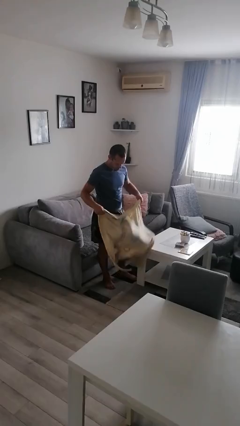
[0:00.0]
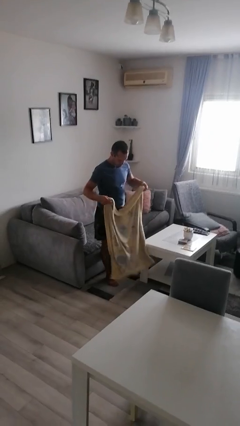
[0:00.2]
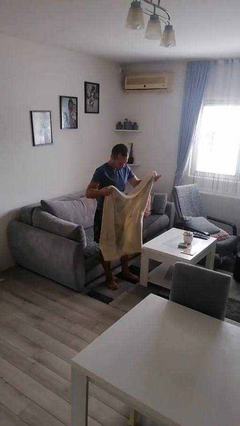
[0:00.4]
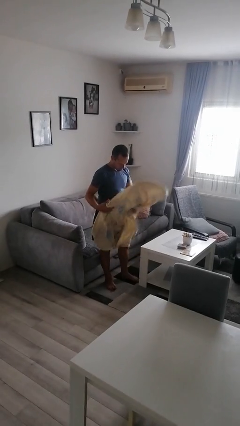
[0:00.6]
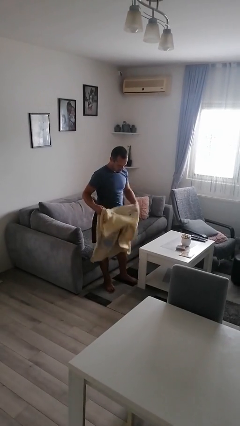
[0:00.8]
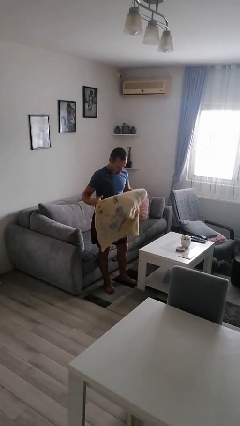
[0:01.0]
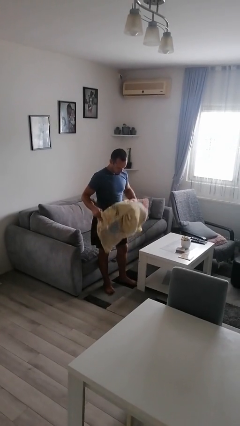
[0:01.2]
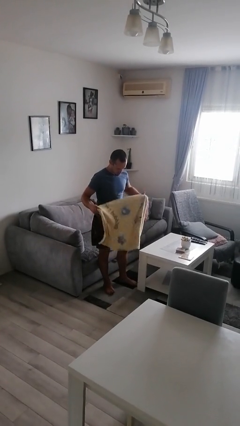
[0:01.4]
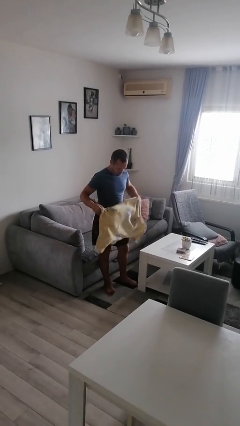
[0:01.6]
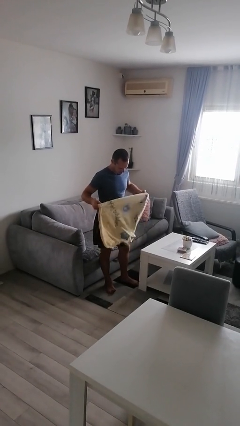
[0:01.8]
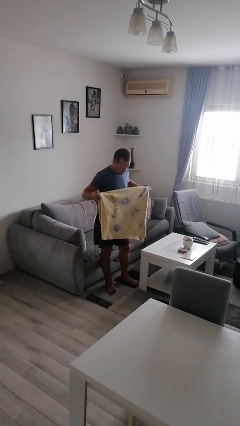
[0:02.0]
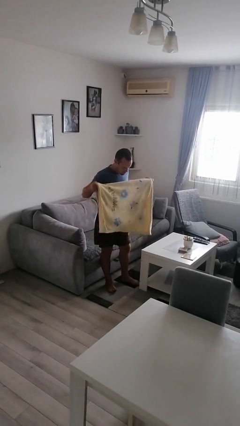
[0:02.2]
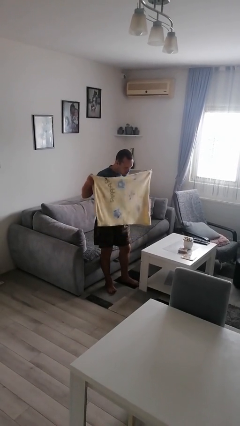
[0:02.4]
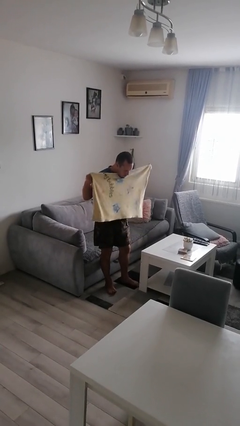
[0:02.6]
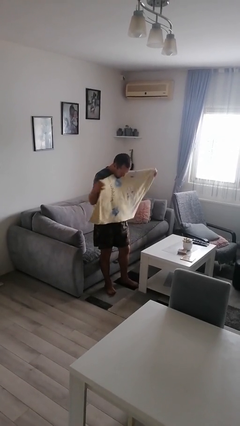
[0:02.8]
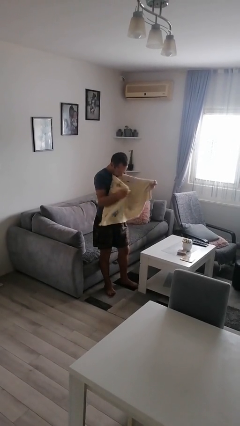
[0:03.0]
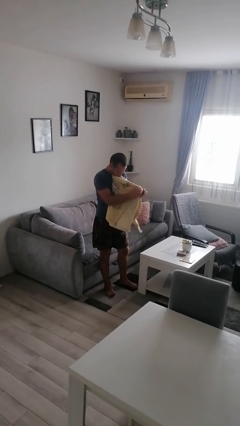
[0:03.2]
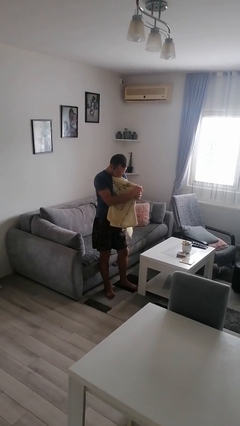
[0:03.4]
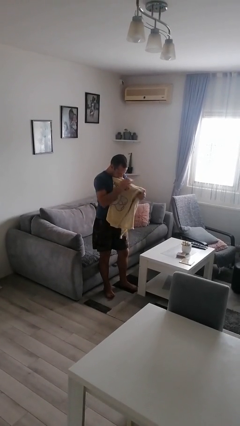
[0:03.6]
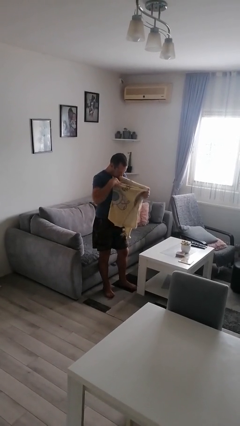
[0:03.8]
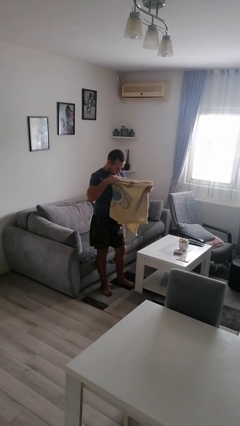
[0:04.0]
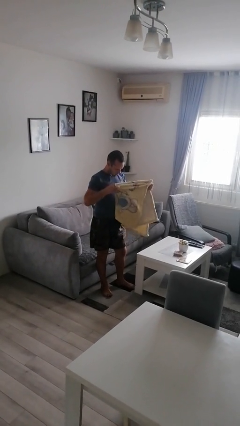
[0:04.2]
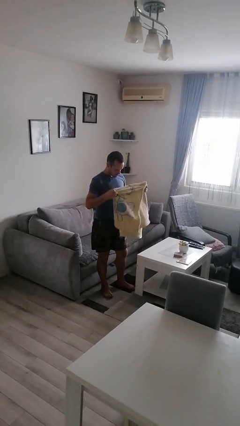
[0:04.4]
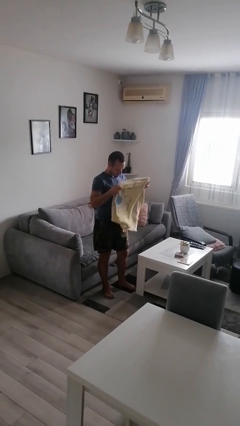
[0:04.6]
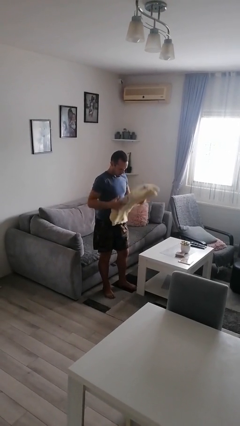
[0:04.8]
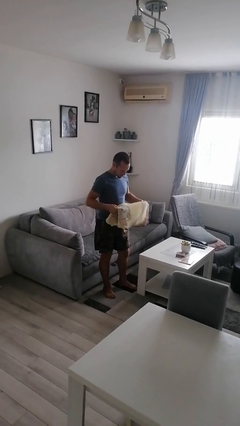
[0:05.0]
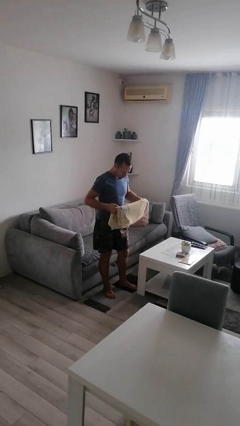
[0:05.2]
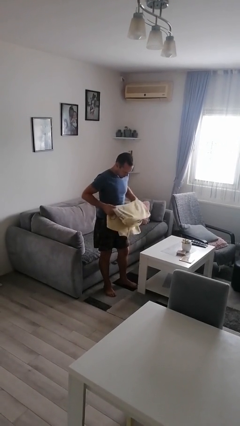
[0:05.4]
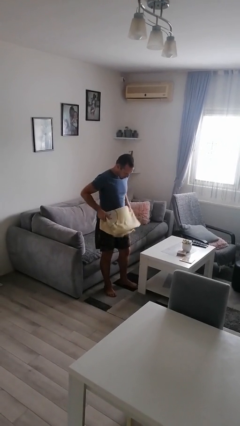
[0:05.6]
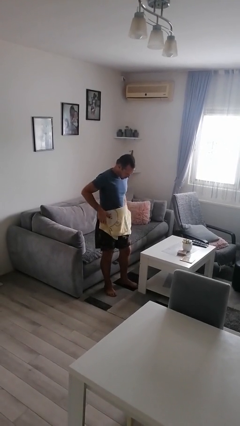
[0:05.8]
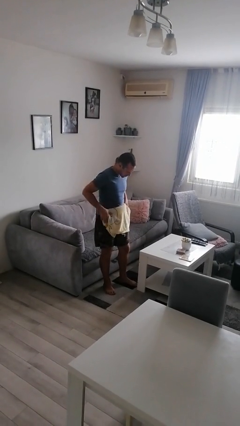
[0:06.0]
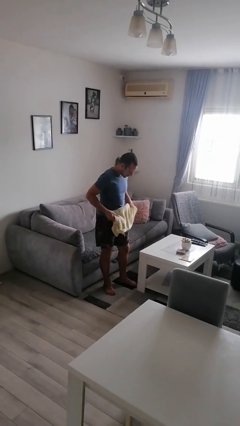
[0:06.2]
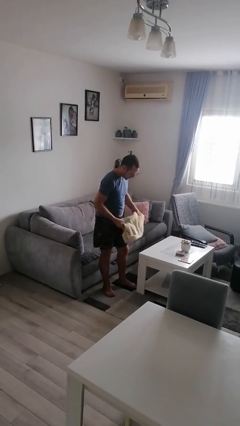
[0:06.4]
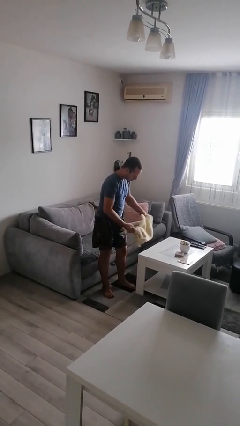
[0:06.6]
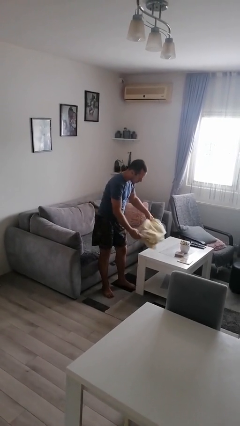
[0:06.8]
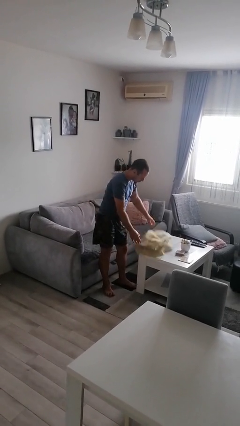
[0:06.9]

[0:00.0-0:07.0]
person folds blanket

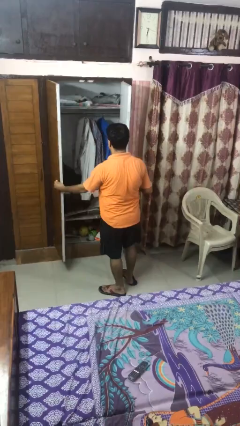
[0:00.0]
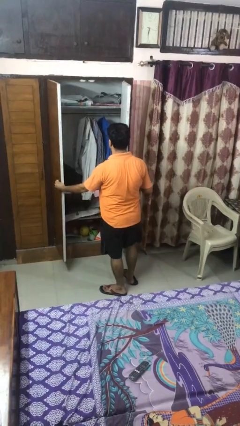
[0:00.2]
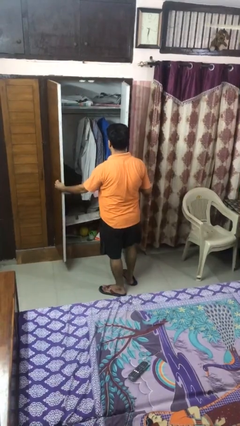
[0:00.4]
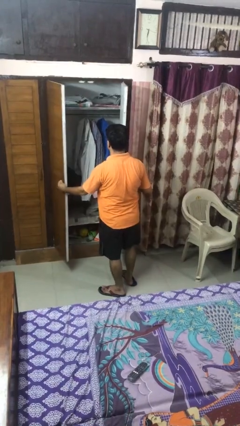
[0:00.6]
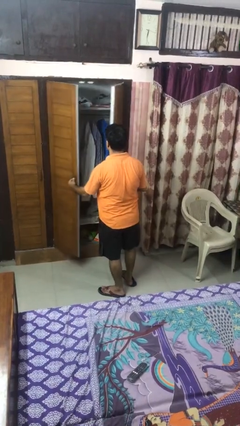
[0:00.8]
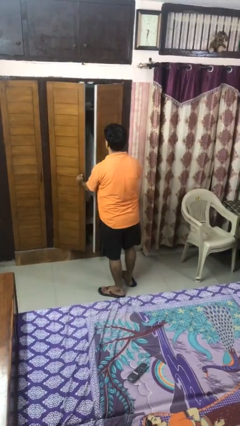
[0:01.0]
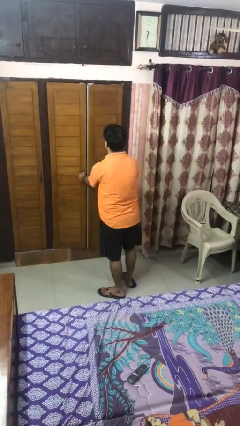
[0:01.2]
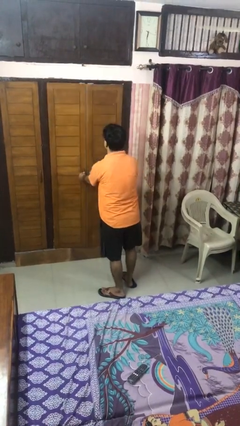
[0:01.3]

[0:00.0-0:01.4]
person closes closet door

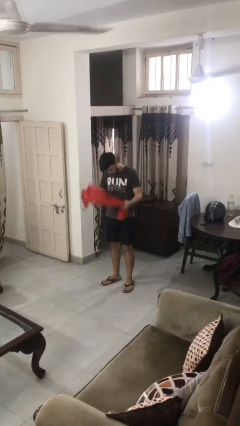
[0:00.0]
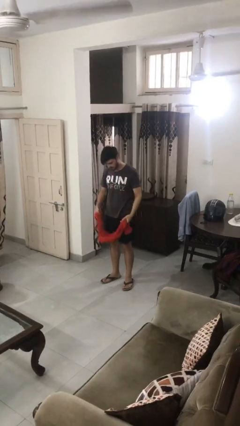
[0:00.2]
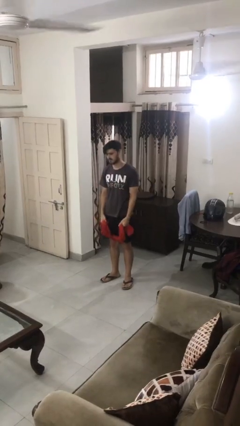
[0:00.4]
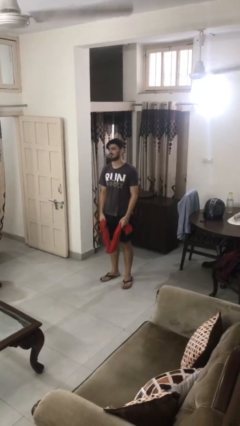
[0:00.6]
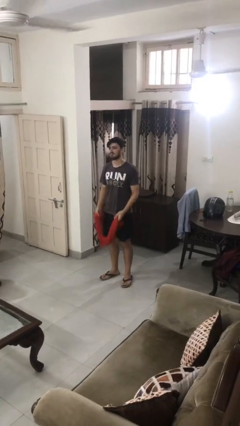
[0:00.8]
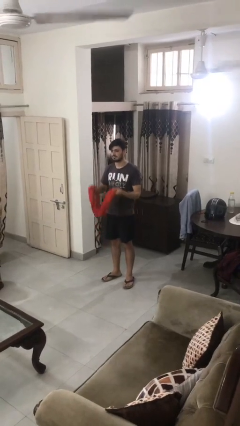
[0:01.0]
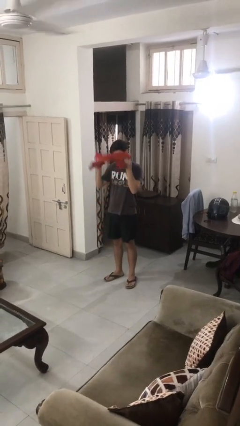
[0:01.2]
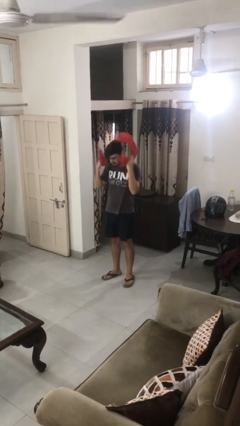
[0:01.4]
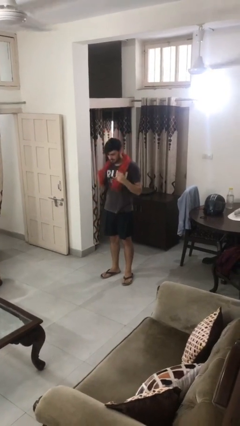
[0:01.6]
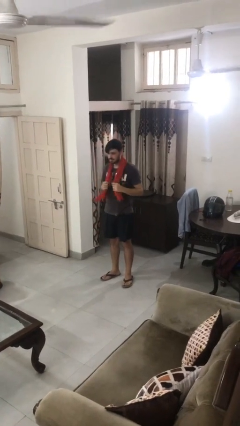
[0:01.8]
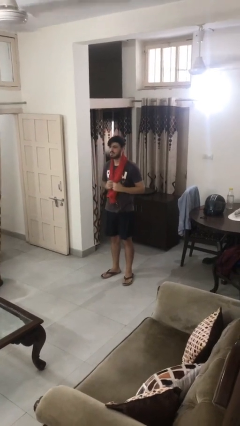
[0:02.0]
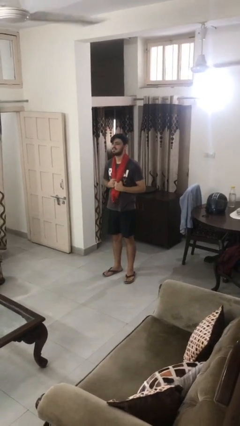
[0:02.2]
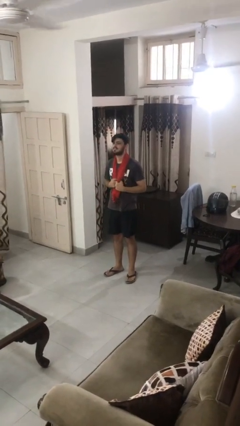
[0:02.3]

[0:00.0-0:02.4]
person puts on scarf

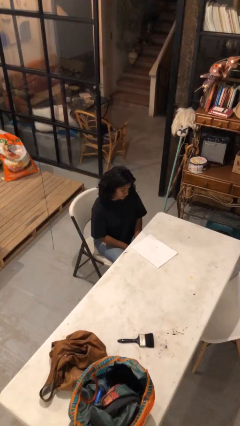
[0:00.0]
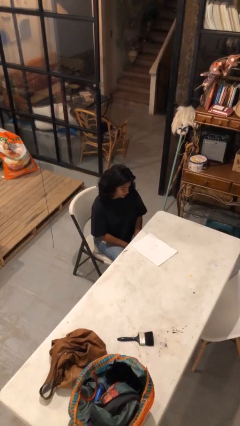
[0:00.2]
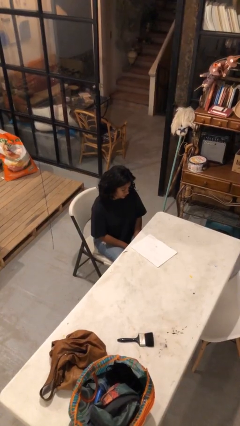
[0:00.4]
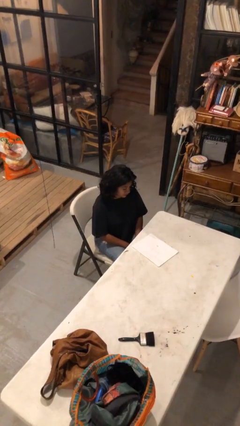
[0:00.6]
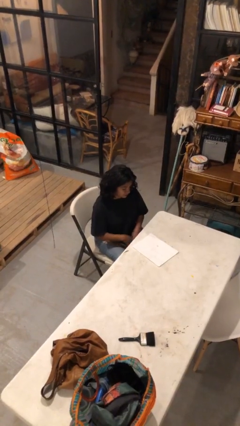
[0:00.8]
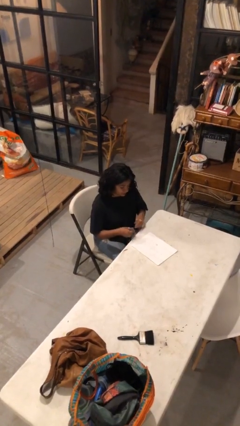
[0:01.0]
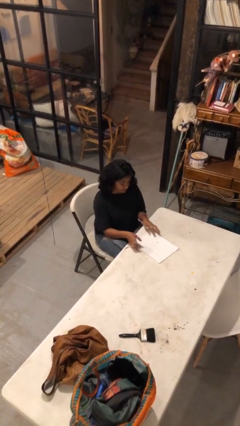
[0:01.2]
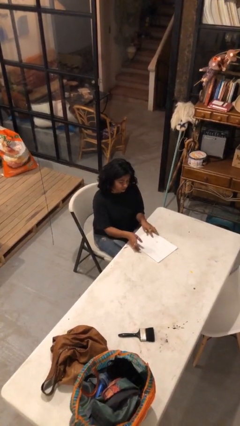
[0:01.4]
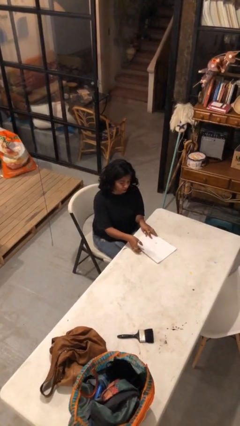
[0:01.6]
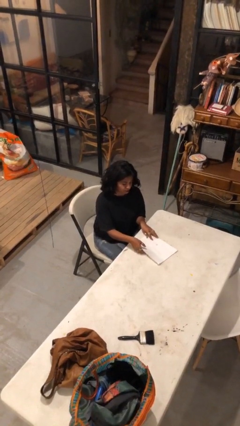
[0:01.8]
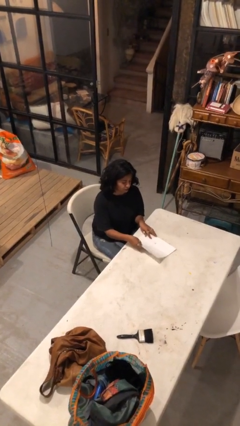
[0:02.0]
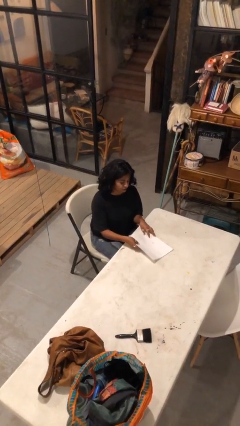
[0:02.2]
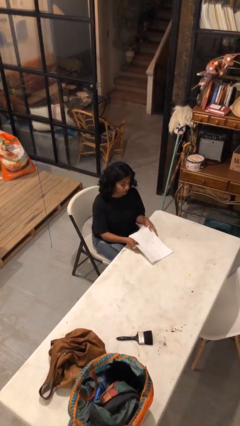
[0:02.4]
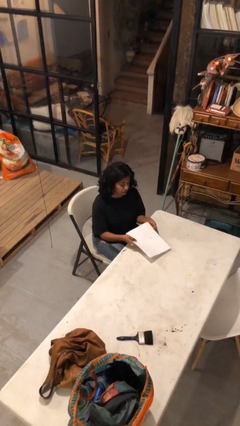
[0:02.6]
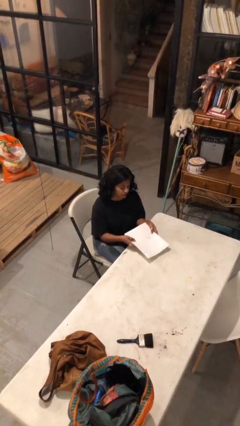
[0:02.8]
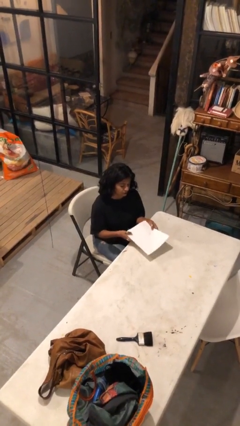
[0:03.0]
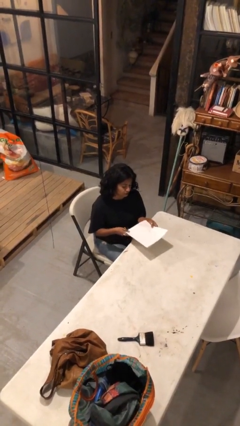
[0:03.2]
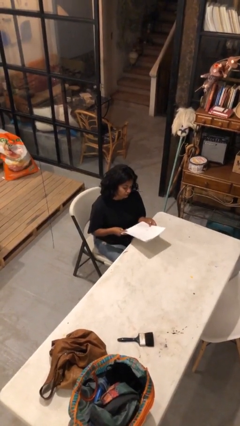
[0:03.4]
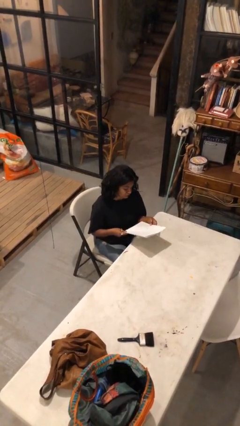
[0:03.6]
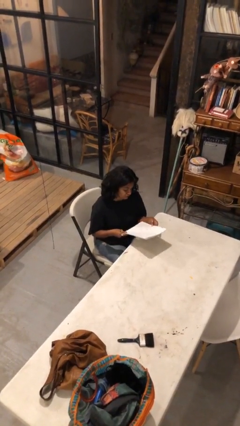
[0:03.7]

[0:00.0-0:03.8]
person picks up object from table

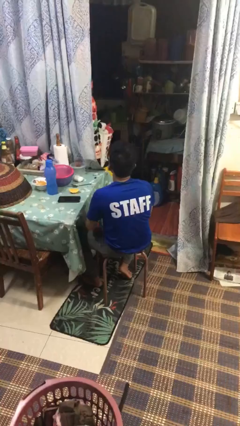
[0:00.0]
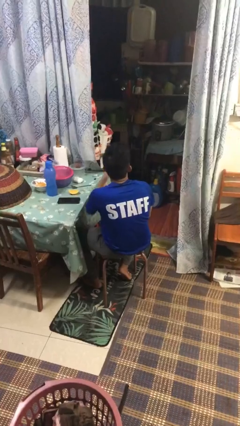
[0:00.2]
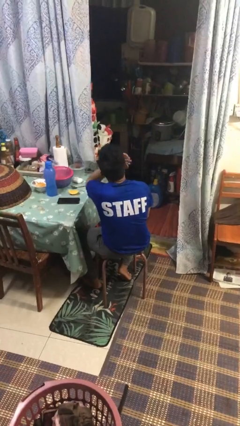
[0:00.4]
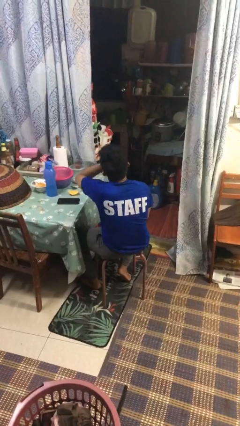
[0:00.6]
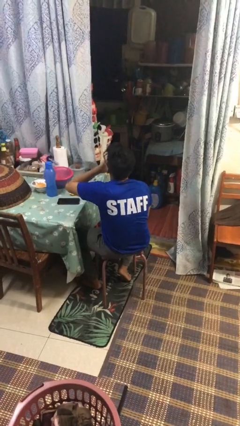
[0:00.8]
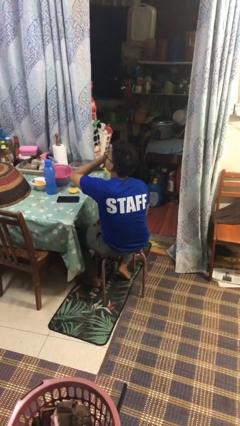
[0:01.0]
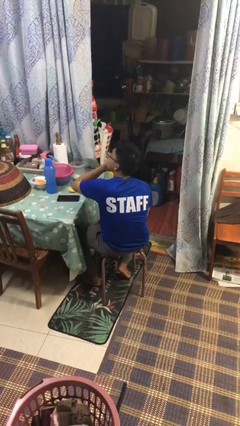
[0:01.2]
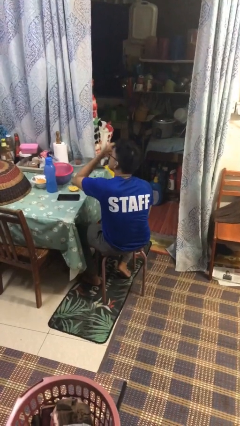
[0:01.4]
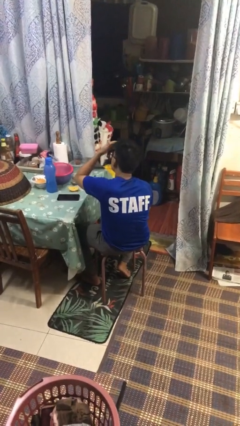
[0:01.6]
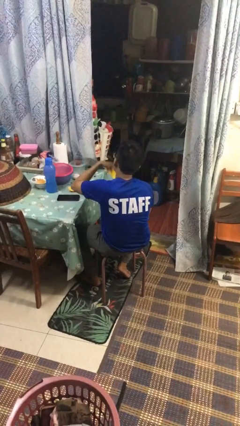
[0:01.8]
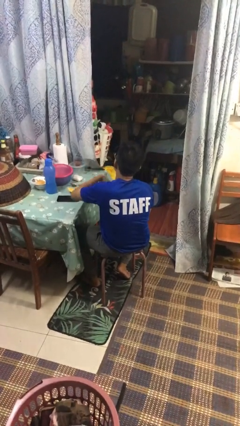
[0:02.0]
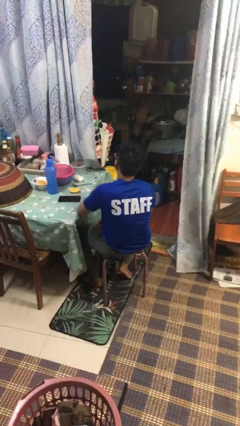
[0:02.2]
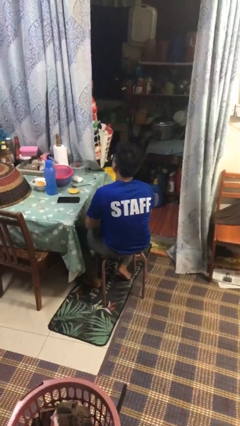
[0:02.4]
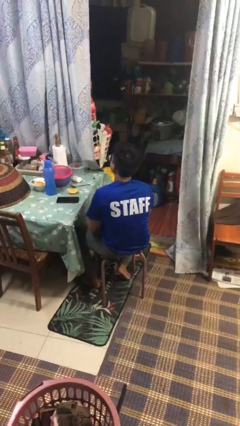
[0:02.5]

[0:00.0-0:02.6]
person scratches face

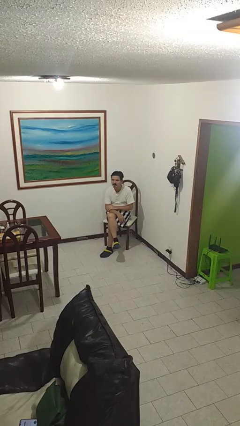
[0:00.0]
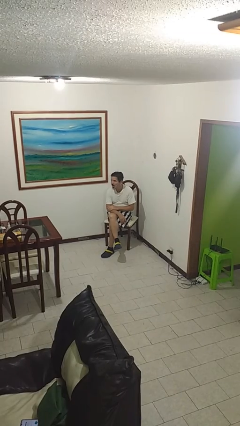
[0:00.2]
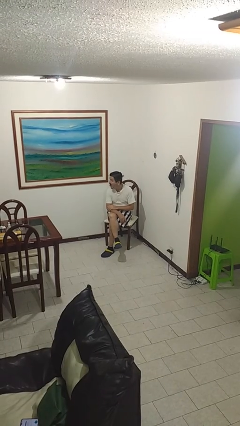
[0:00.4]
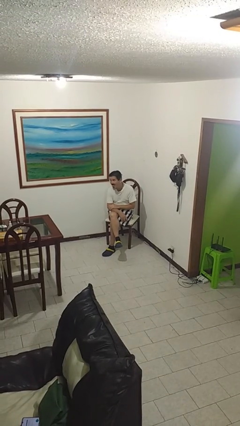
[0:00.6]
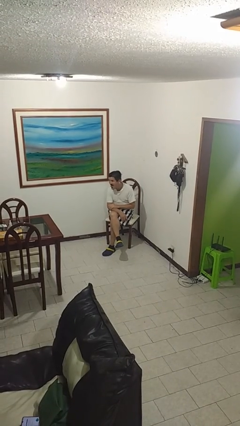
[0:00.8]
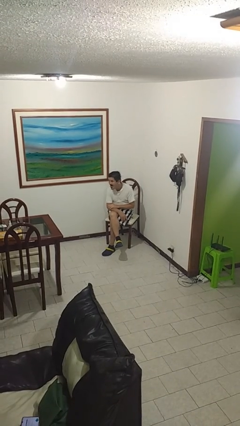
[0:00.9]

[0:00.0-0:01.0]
person sticks out tongue
